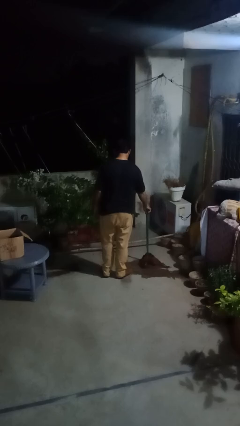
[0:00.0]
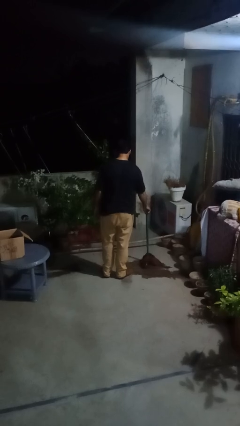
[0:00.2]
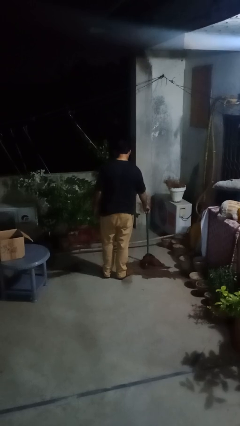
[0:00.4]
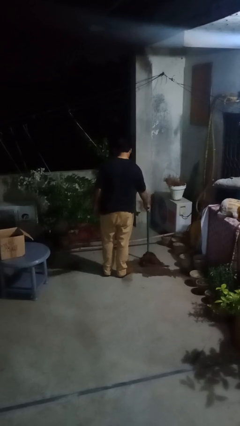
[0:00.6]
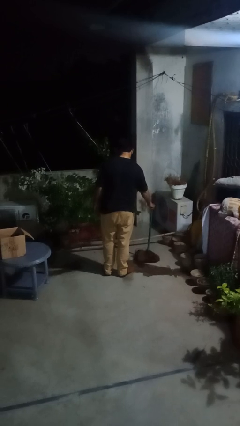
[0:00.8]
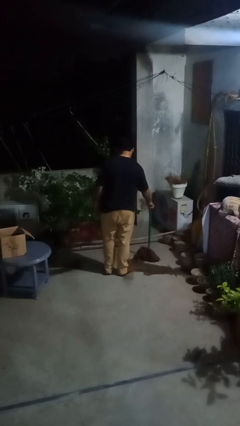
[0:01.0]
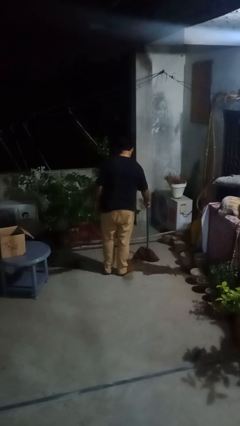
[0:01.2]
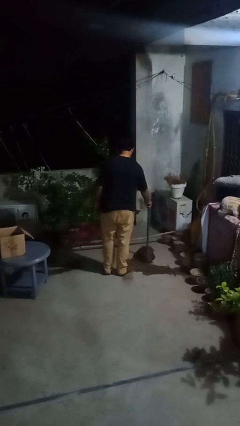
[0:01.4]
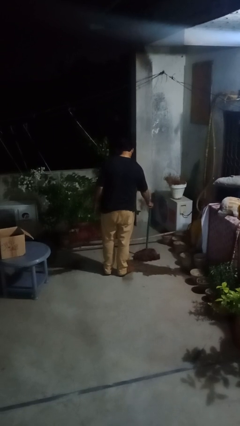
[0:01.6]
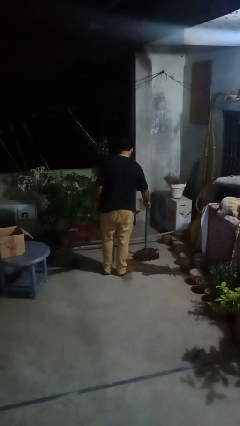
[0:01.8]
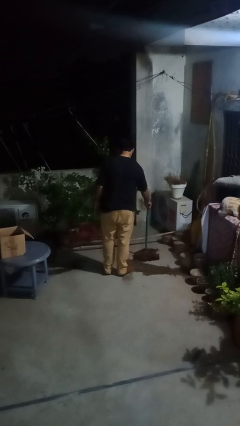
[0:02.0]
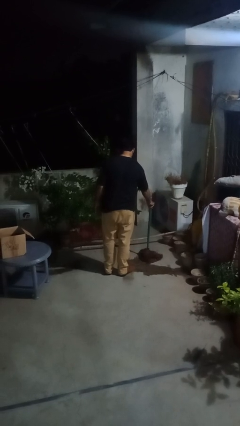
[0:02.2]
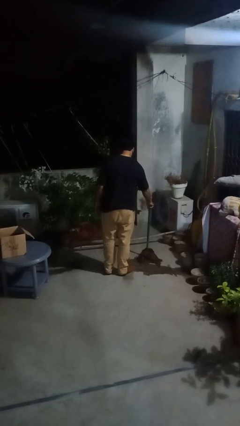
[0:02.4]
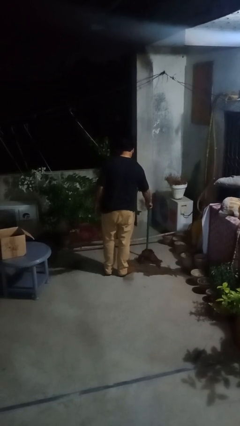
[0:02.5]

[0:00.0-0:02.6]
person mops

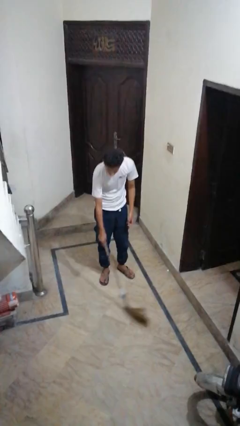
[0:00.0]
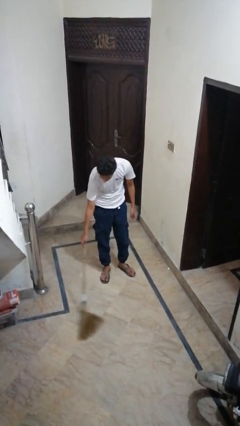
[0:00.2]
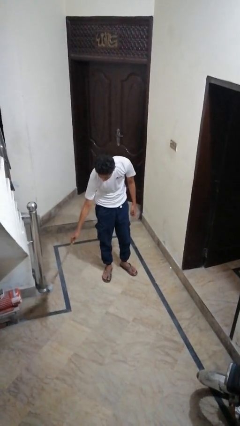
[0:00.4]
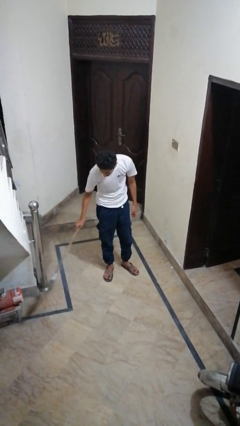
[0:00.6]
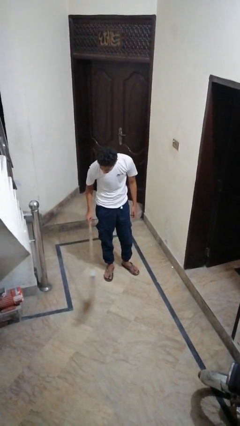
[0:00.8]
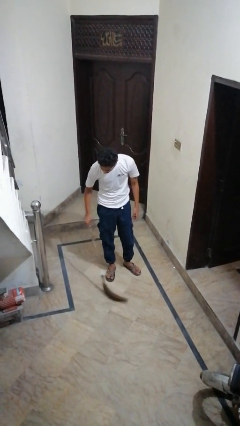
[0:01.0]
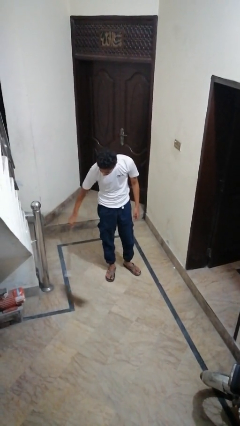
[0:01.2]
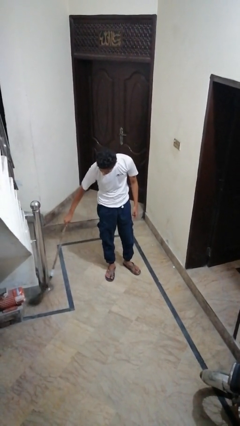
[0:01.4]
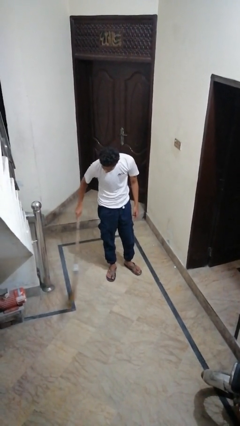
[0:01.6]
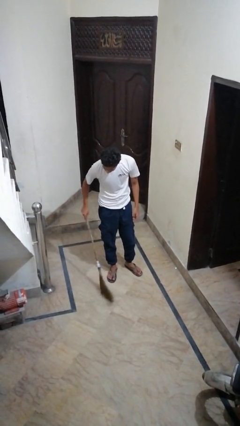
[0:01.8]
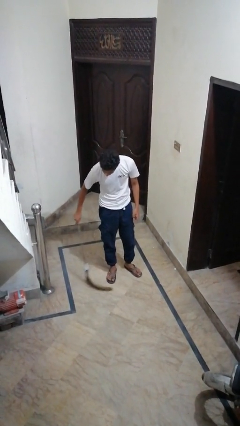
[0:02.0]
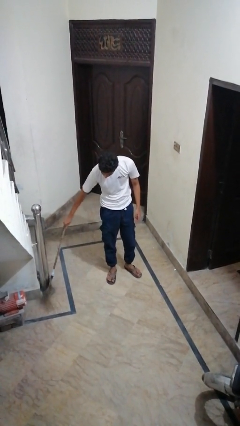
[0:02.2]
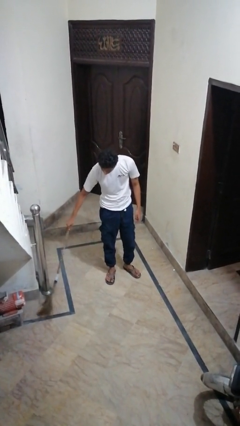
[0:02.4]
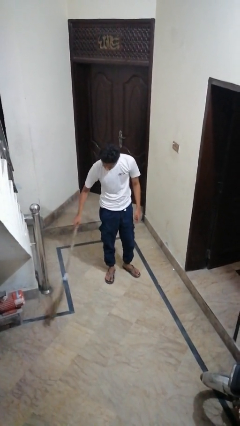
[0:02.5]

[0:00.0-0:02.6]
person sweeps floor

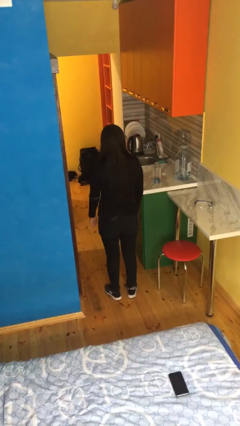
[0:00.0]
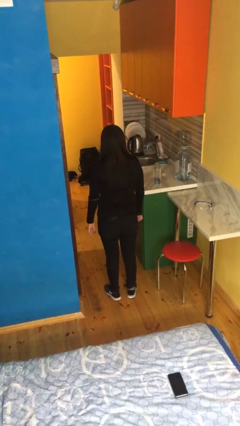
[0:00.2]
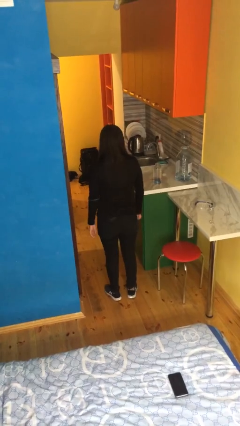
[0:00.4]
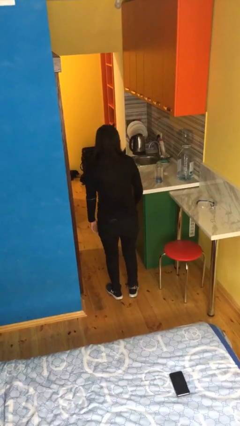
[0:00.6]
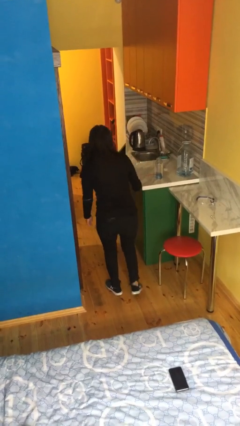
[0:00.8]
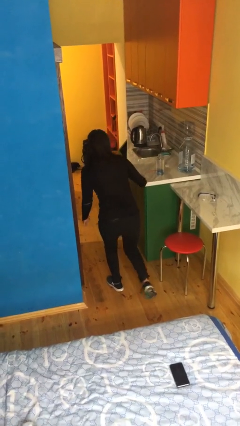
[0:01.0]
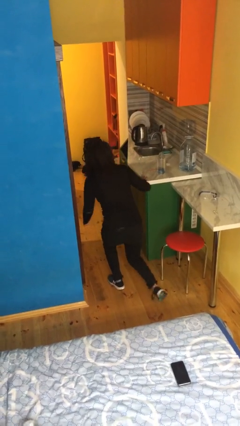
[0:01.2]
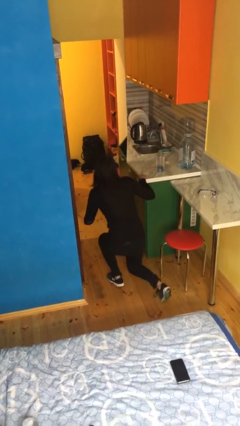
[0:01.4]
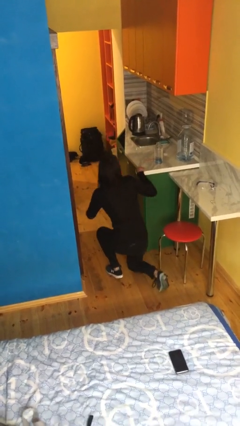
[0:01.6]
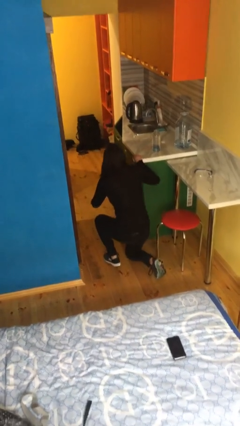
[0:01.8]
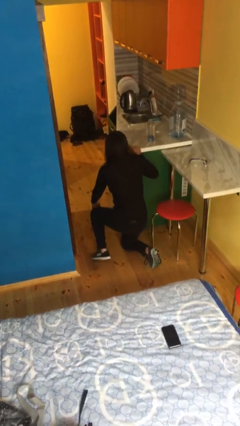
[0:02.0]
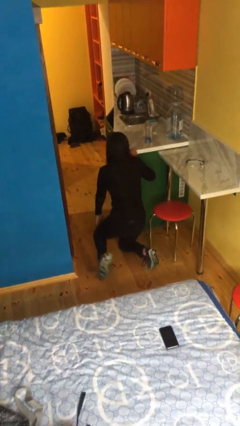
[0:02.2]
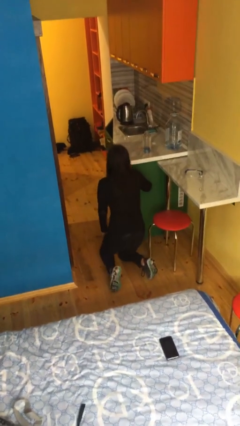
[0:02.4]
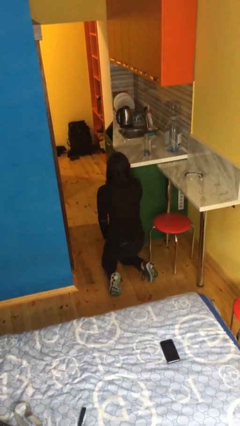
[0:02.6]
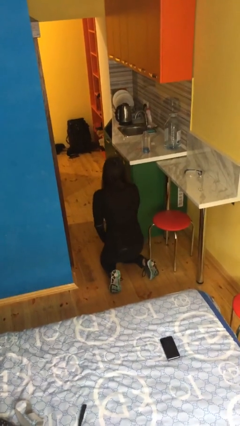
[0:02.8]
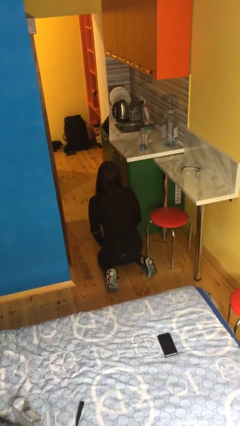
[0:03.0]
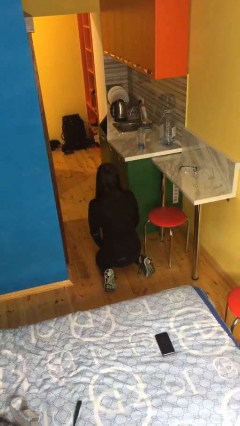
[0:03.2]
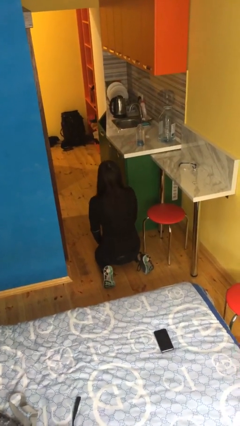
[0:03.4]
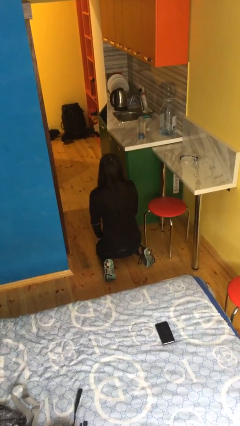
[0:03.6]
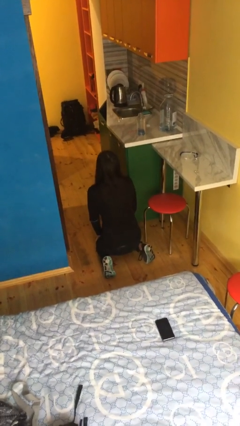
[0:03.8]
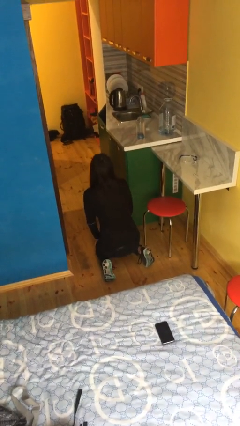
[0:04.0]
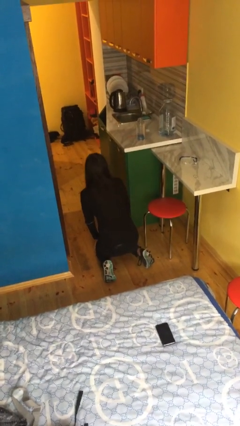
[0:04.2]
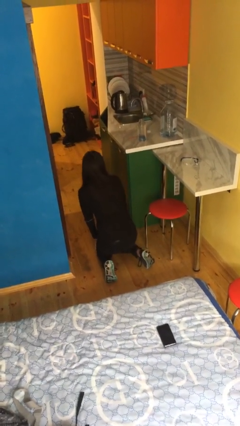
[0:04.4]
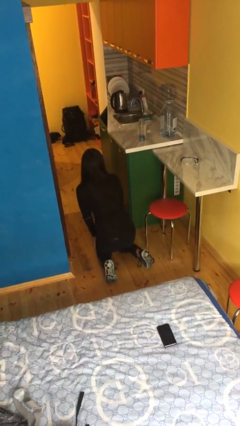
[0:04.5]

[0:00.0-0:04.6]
person kneels

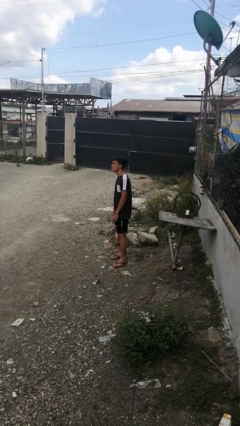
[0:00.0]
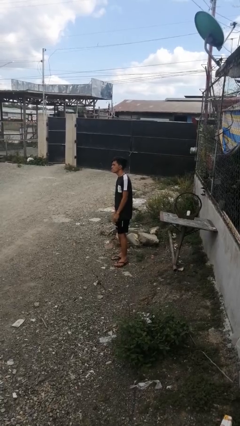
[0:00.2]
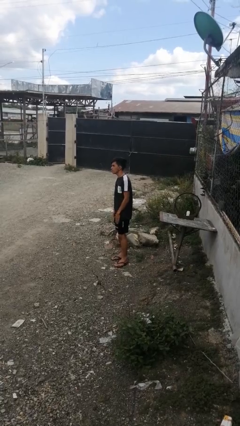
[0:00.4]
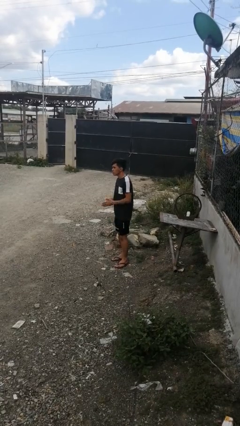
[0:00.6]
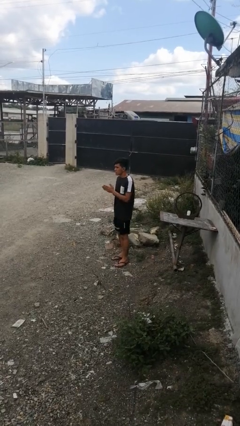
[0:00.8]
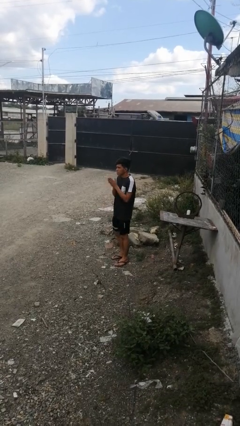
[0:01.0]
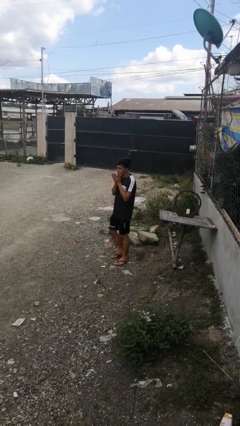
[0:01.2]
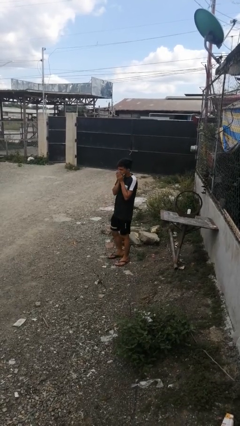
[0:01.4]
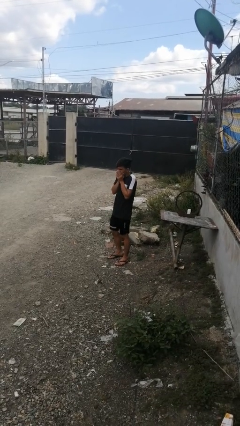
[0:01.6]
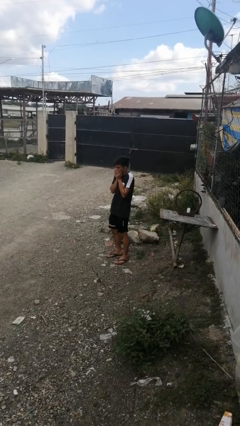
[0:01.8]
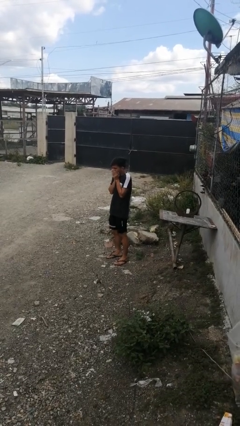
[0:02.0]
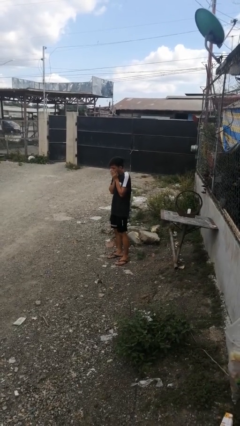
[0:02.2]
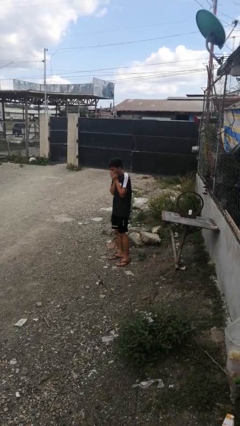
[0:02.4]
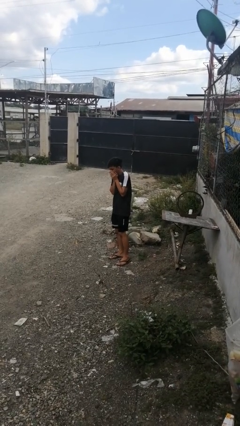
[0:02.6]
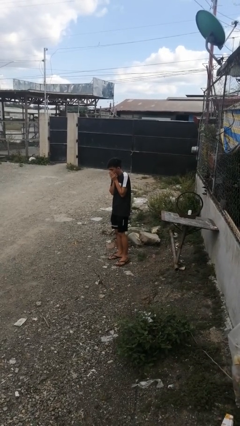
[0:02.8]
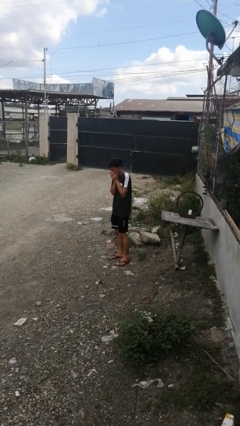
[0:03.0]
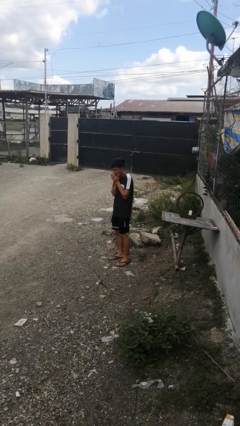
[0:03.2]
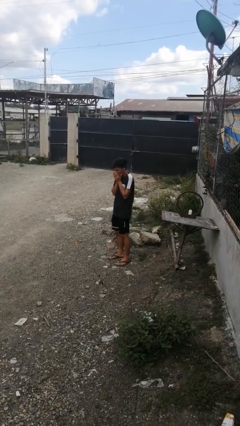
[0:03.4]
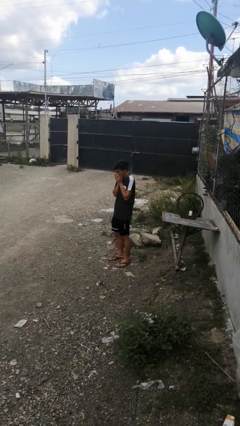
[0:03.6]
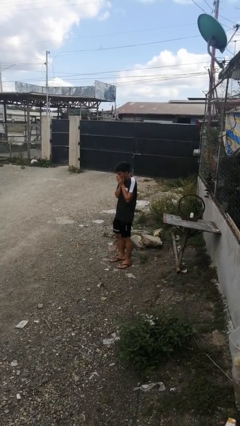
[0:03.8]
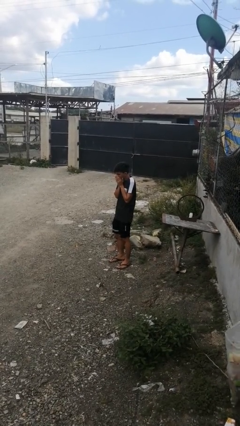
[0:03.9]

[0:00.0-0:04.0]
person blows into hands

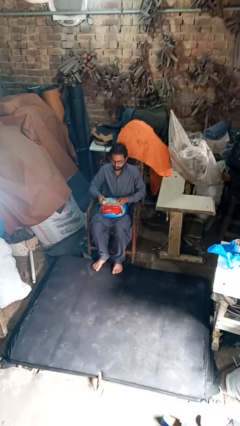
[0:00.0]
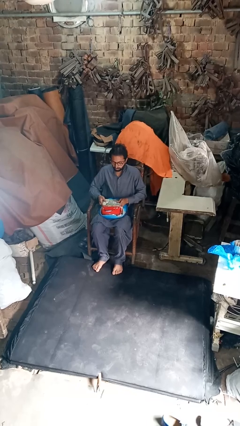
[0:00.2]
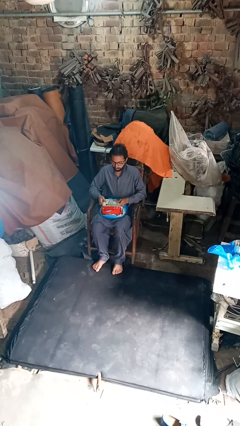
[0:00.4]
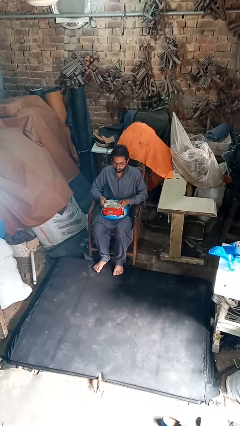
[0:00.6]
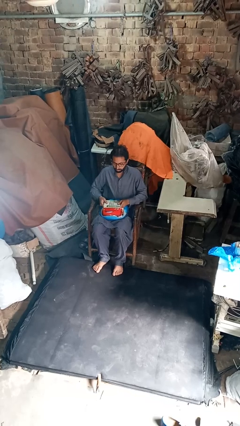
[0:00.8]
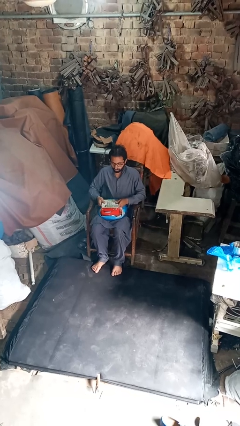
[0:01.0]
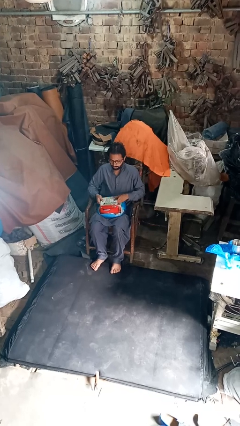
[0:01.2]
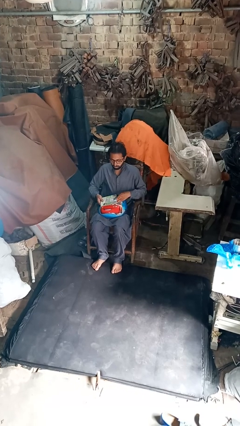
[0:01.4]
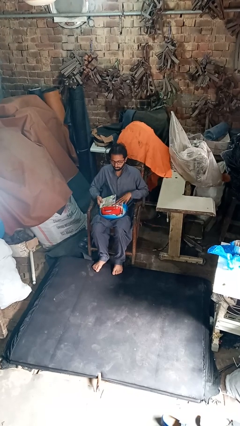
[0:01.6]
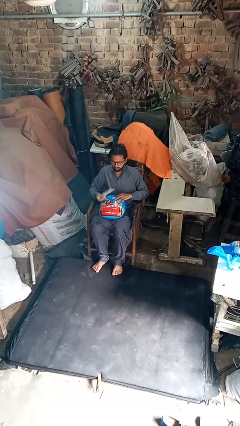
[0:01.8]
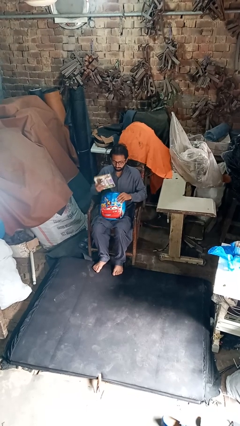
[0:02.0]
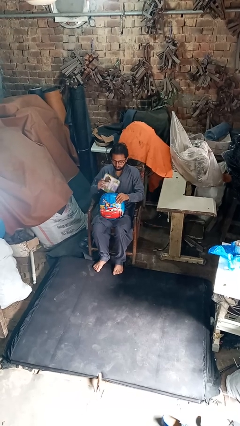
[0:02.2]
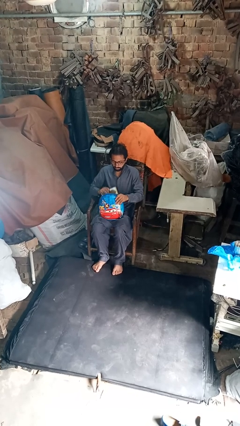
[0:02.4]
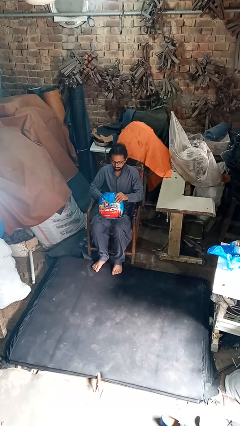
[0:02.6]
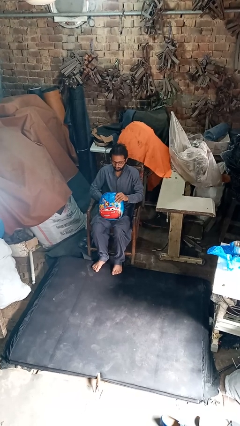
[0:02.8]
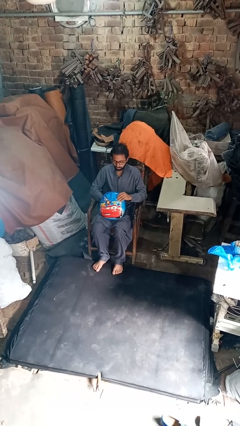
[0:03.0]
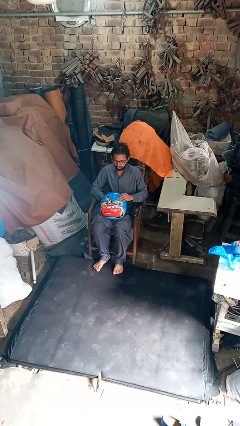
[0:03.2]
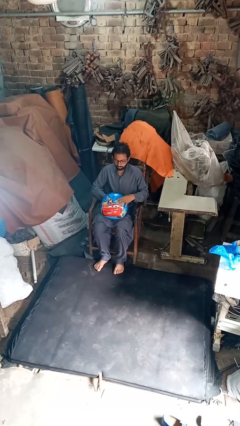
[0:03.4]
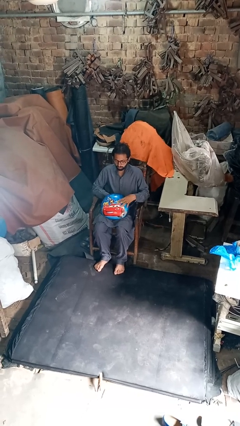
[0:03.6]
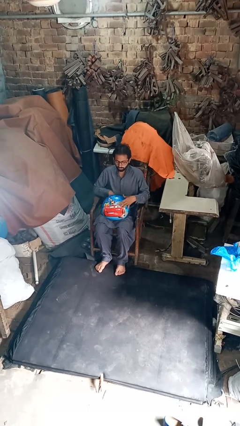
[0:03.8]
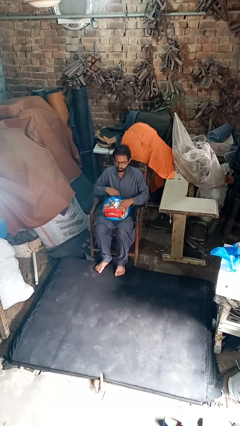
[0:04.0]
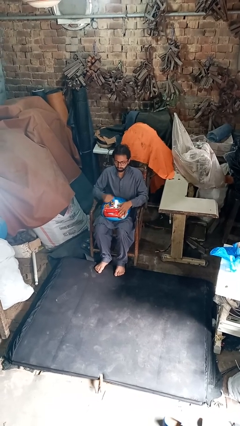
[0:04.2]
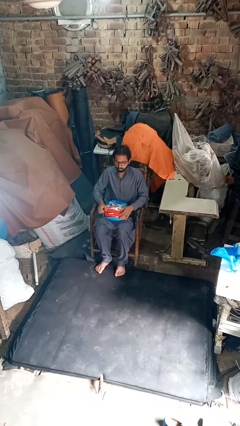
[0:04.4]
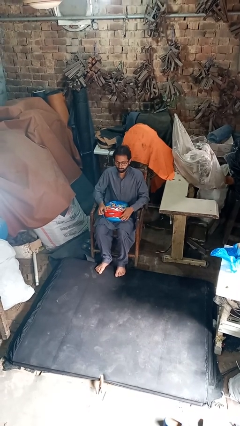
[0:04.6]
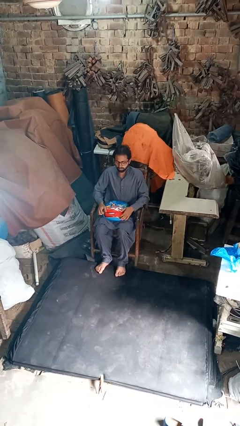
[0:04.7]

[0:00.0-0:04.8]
person puts object into purse
